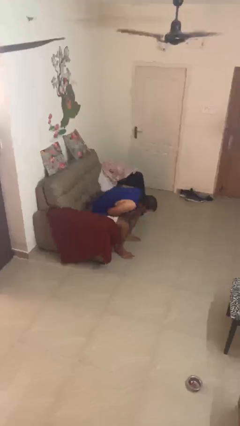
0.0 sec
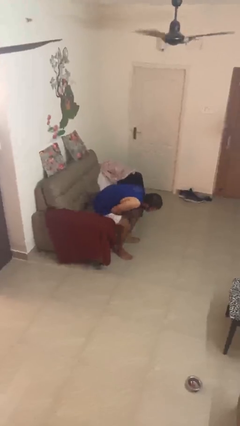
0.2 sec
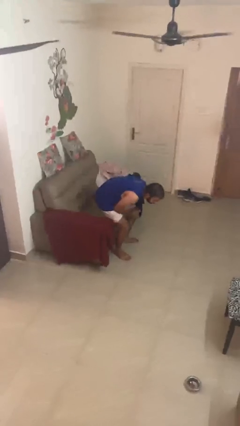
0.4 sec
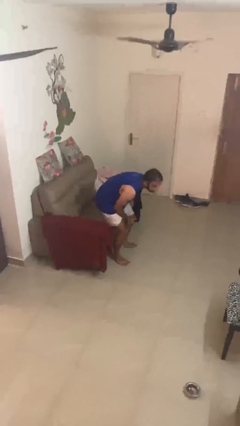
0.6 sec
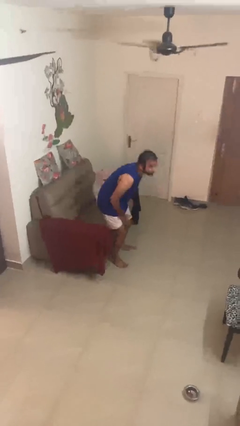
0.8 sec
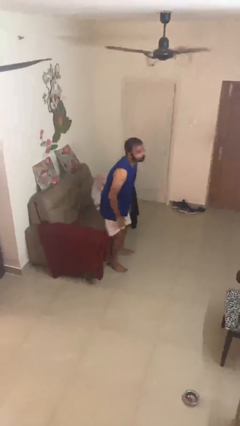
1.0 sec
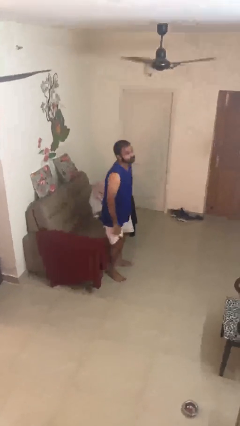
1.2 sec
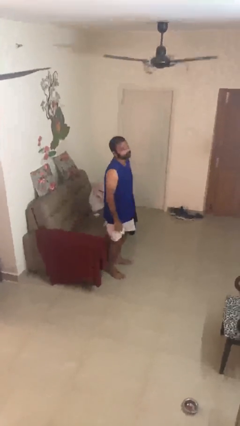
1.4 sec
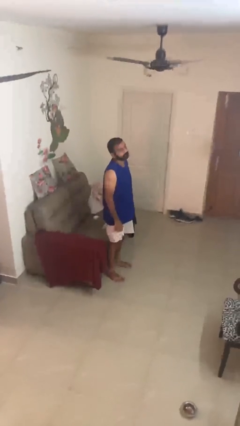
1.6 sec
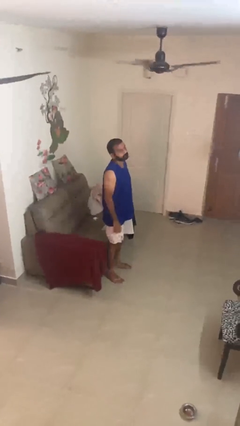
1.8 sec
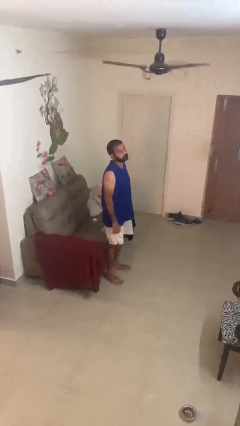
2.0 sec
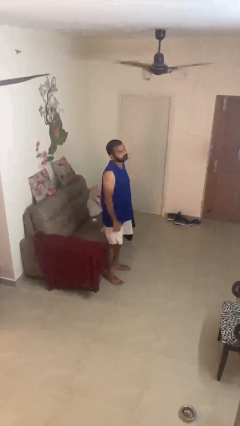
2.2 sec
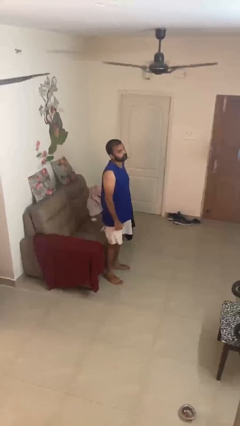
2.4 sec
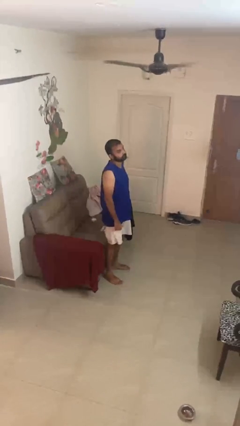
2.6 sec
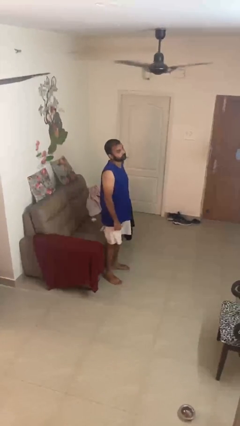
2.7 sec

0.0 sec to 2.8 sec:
person stands up

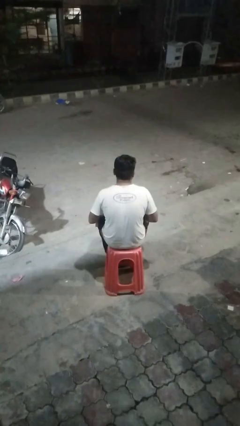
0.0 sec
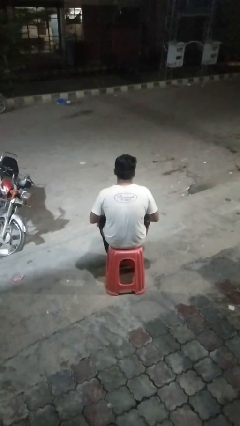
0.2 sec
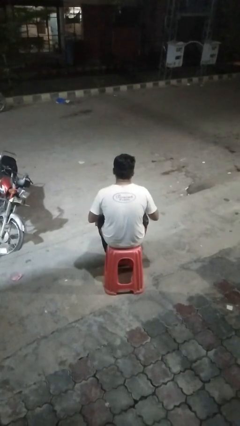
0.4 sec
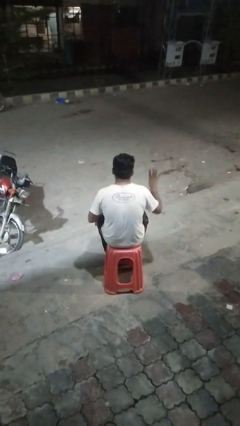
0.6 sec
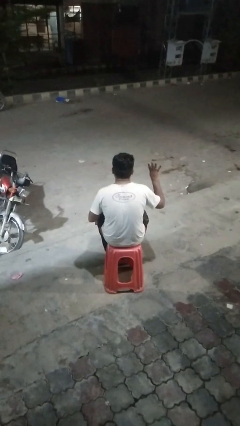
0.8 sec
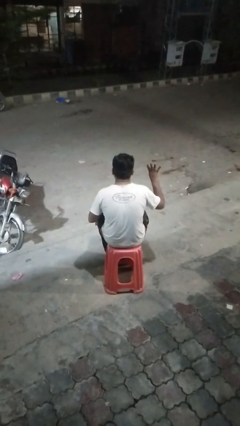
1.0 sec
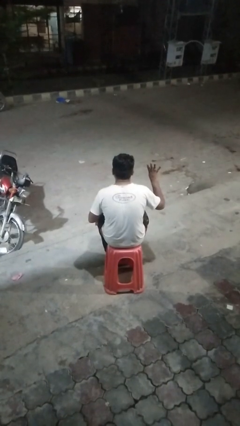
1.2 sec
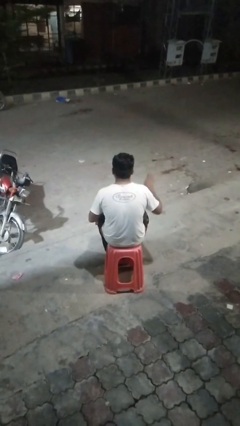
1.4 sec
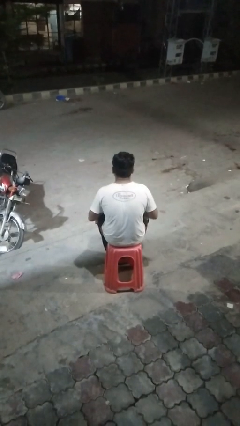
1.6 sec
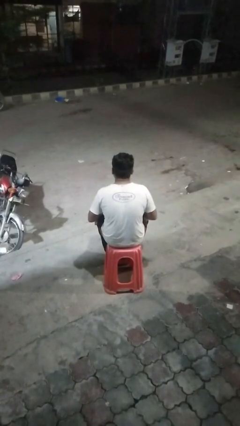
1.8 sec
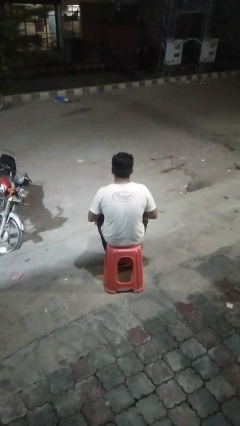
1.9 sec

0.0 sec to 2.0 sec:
person gestures number four

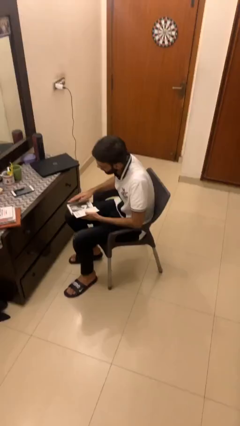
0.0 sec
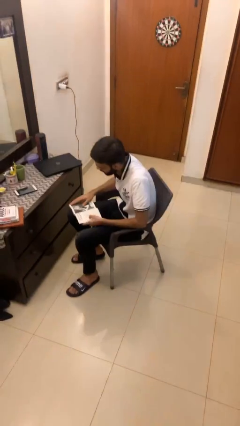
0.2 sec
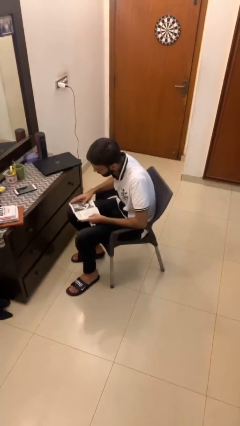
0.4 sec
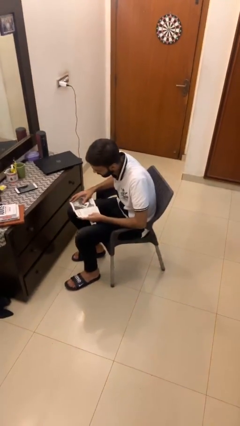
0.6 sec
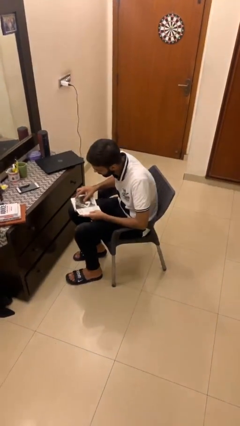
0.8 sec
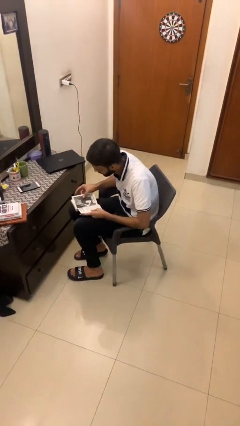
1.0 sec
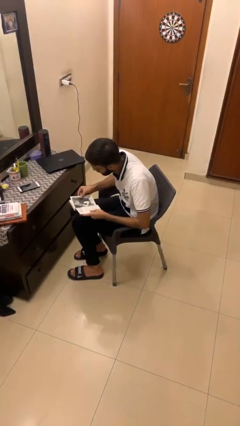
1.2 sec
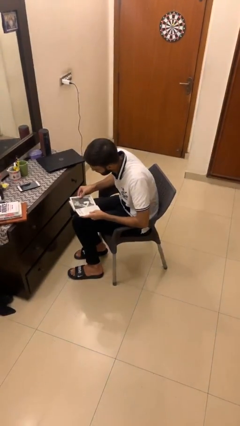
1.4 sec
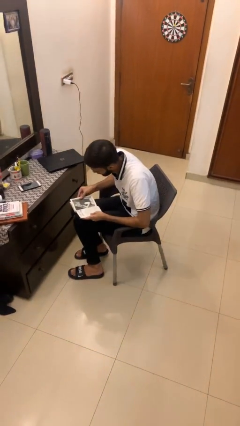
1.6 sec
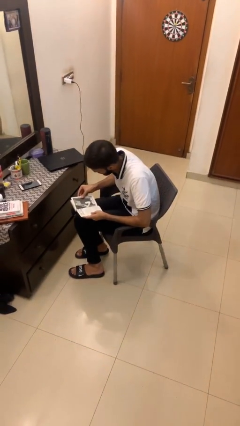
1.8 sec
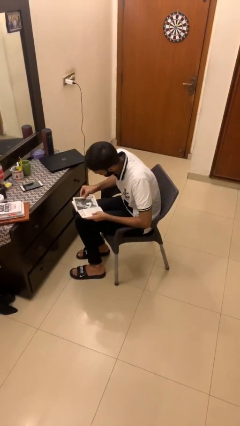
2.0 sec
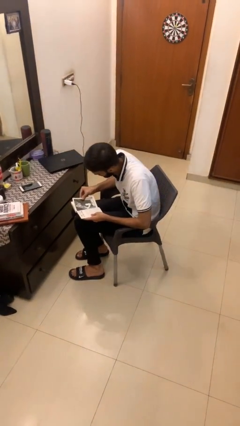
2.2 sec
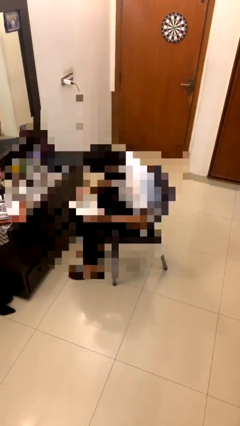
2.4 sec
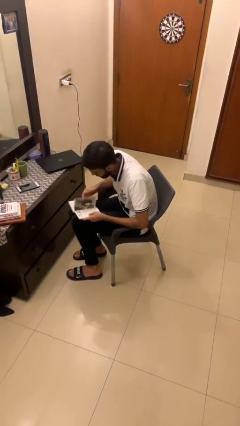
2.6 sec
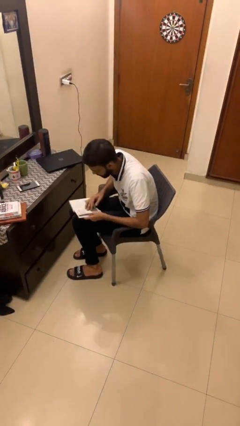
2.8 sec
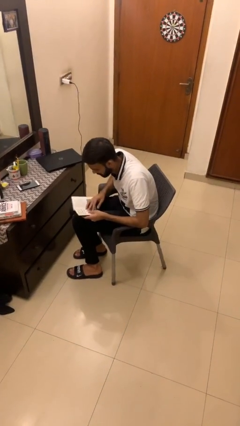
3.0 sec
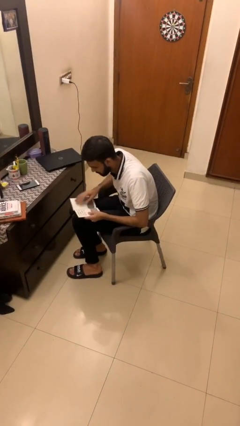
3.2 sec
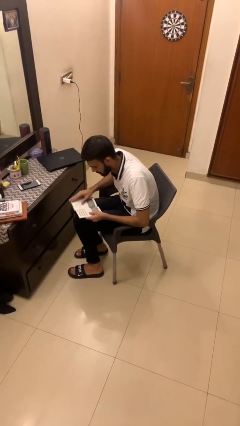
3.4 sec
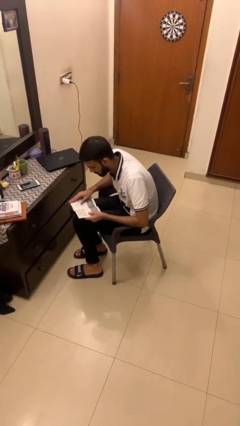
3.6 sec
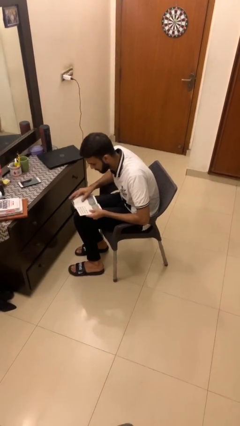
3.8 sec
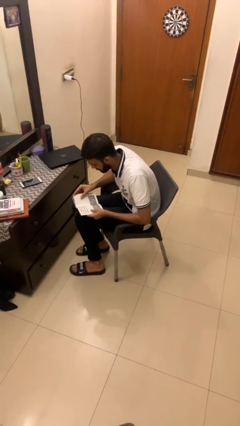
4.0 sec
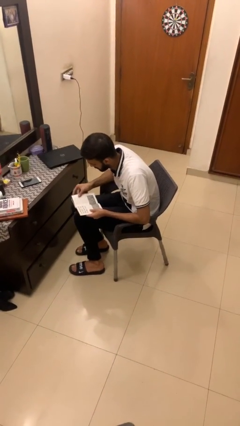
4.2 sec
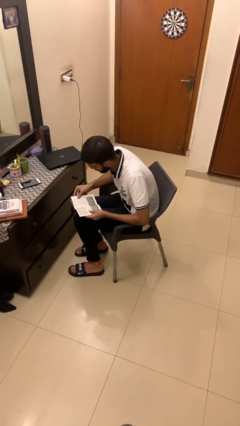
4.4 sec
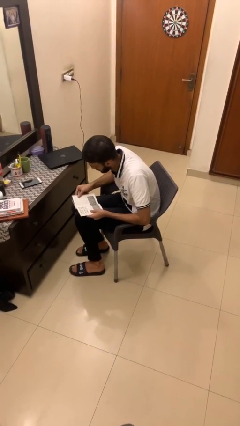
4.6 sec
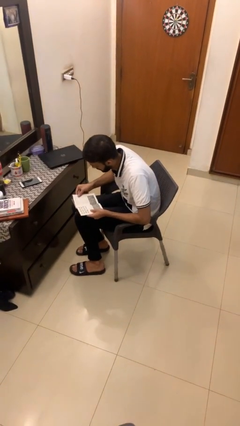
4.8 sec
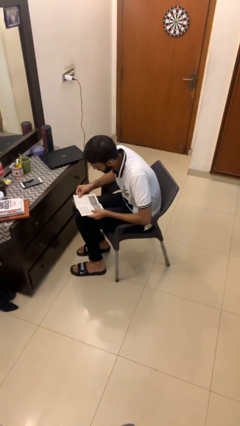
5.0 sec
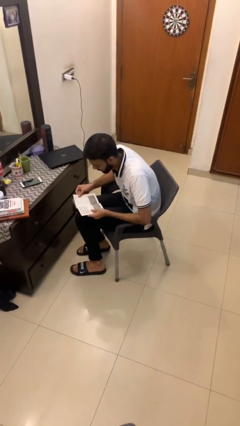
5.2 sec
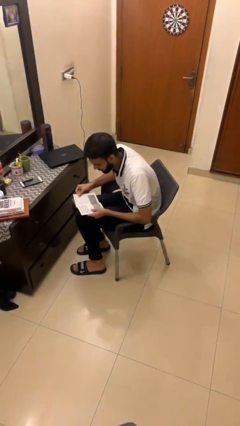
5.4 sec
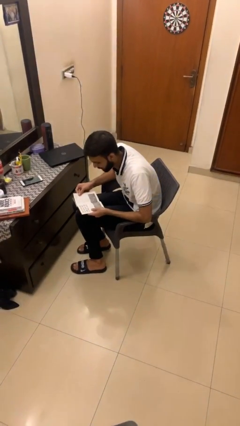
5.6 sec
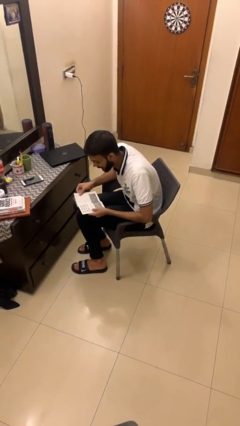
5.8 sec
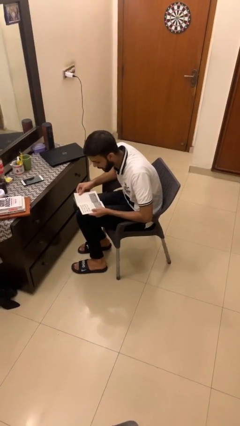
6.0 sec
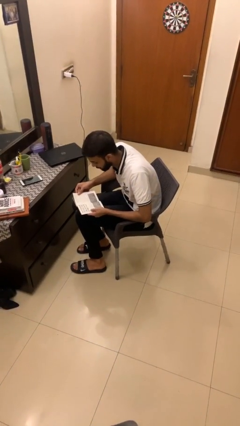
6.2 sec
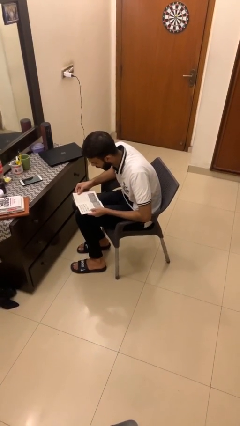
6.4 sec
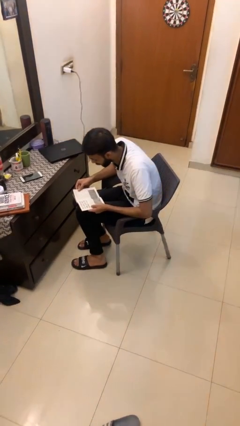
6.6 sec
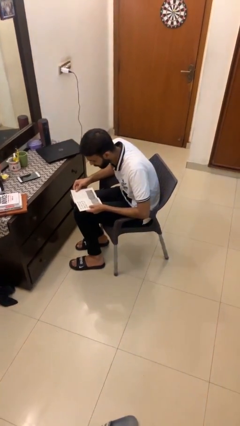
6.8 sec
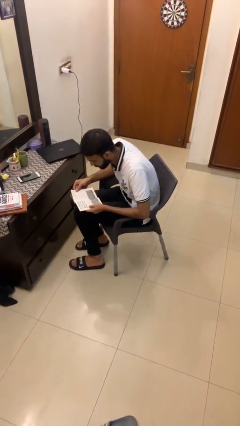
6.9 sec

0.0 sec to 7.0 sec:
person reads document

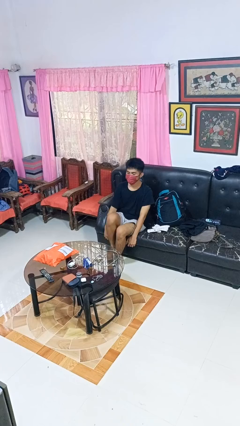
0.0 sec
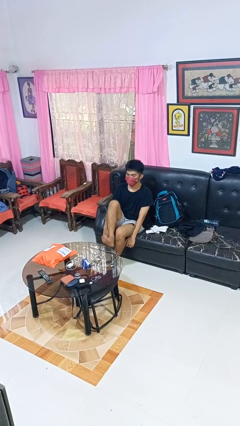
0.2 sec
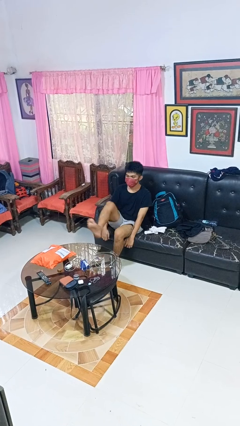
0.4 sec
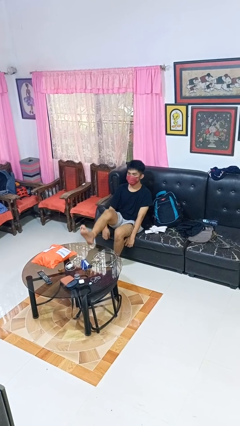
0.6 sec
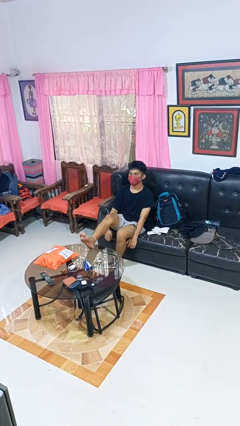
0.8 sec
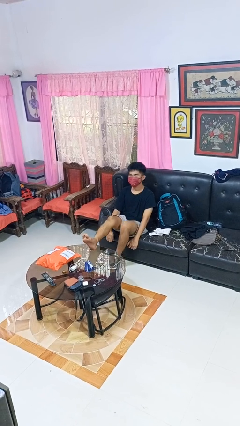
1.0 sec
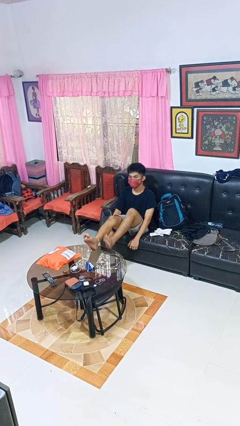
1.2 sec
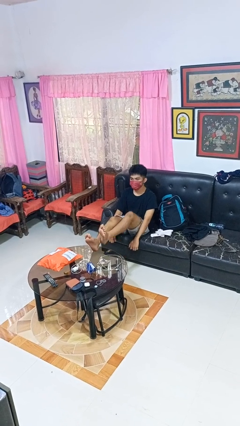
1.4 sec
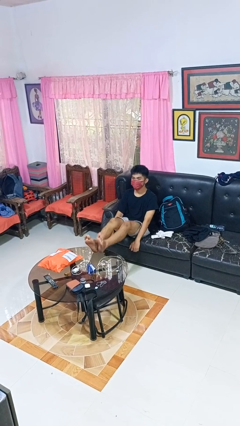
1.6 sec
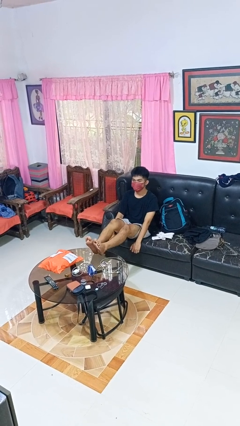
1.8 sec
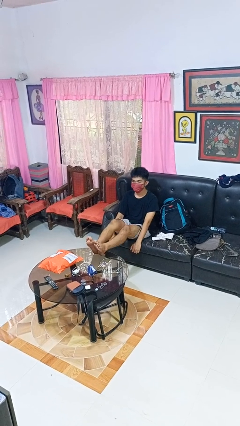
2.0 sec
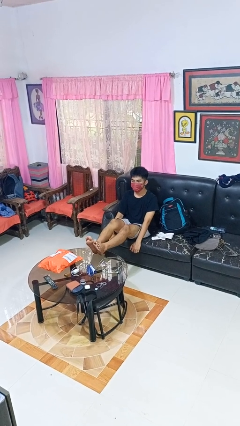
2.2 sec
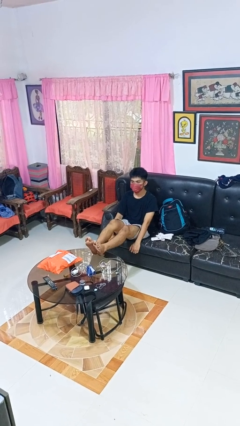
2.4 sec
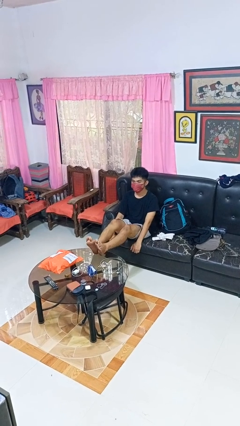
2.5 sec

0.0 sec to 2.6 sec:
person puts feet up

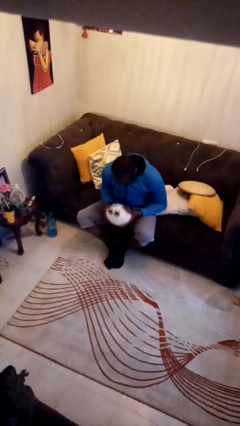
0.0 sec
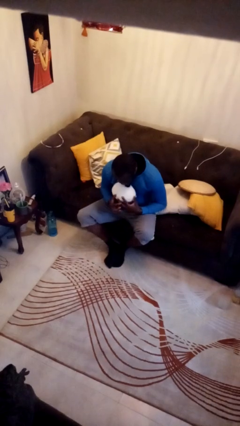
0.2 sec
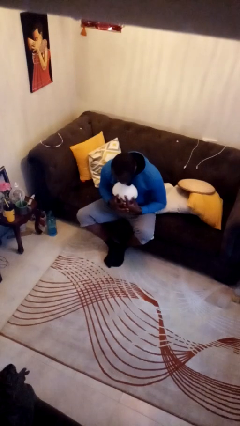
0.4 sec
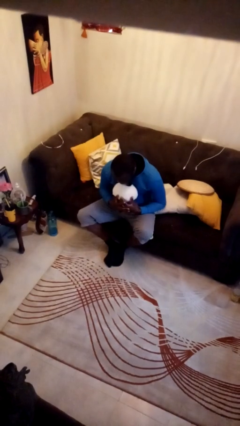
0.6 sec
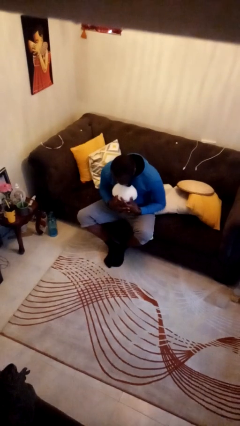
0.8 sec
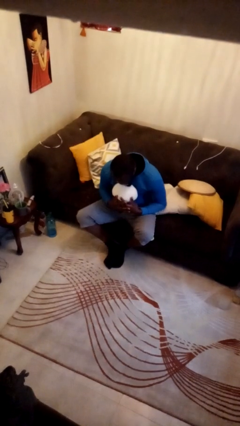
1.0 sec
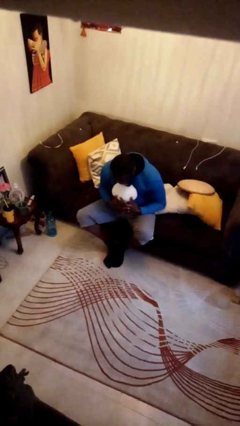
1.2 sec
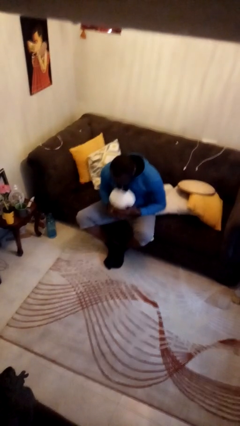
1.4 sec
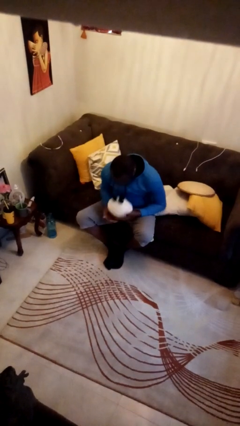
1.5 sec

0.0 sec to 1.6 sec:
person hugs stuffed animal

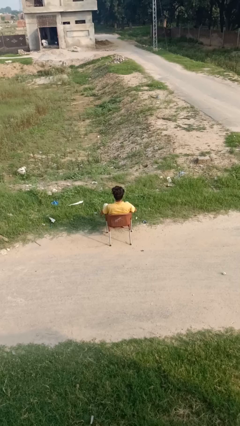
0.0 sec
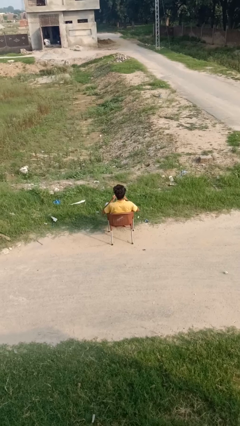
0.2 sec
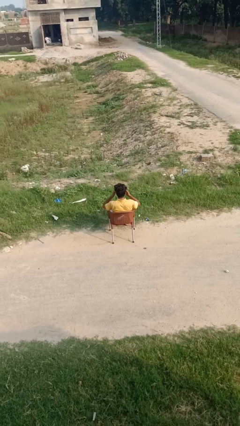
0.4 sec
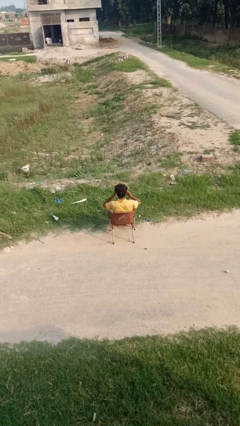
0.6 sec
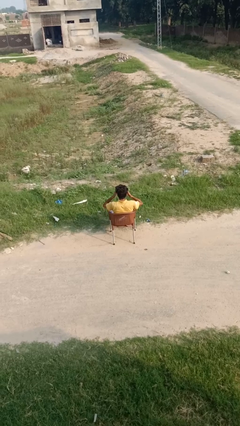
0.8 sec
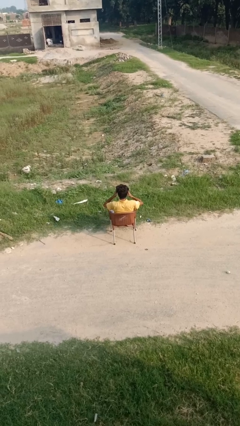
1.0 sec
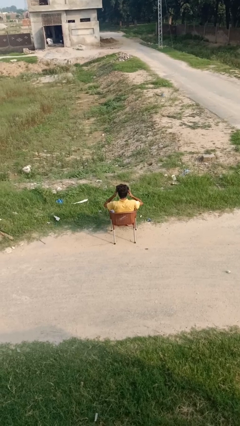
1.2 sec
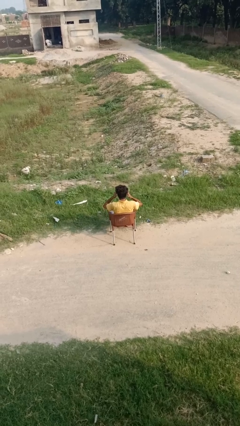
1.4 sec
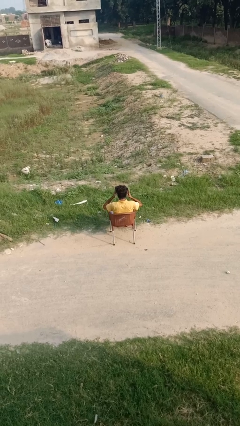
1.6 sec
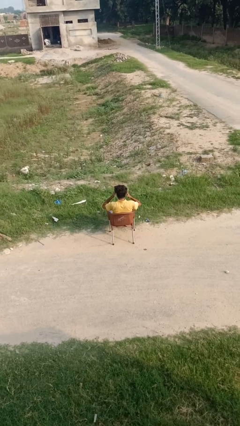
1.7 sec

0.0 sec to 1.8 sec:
person rubs eyes
